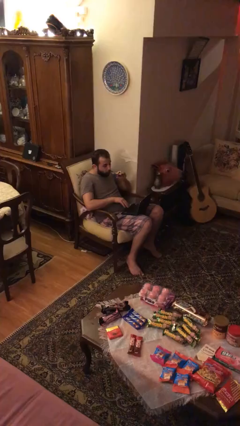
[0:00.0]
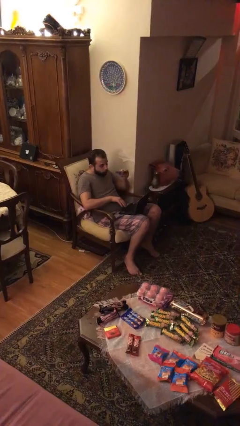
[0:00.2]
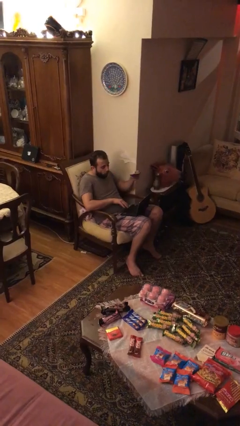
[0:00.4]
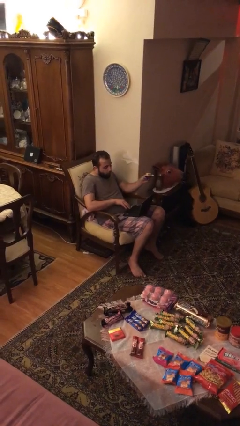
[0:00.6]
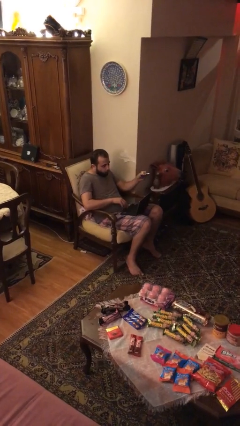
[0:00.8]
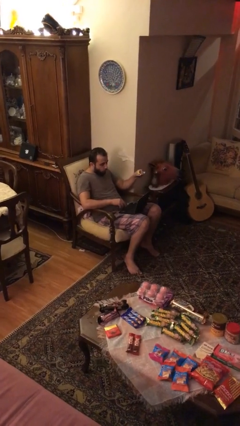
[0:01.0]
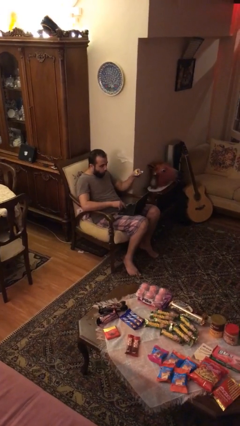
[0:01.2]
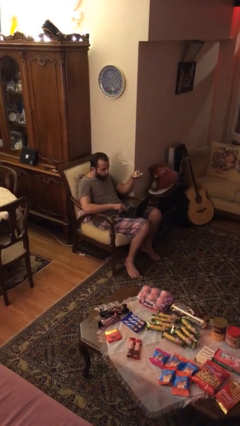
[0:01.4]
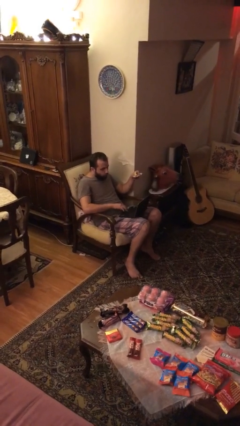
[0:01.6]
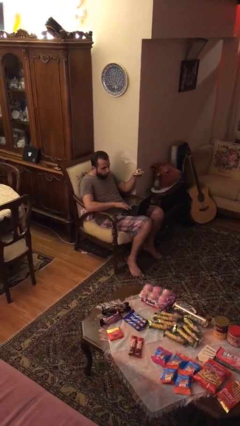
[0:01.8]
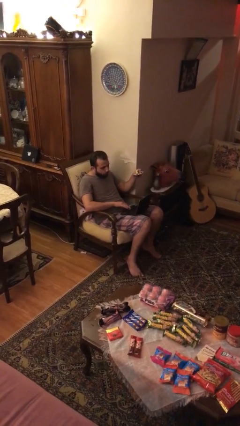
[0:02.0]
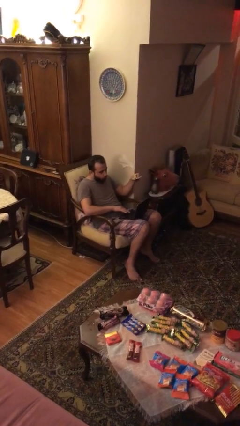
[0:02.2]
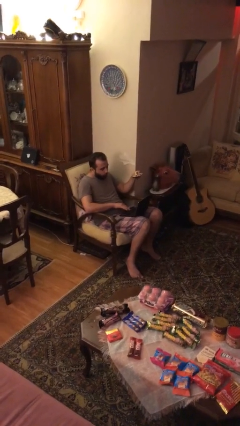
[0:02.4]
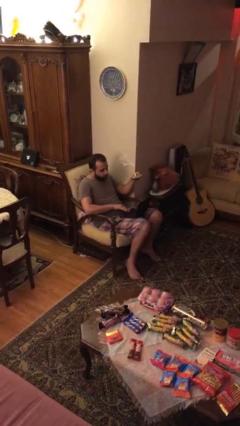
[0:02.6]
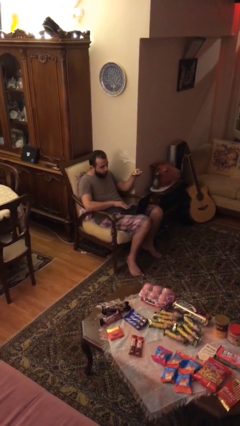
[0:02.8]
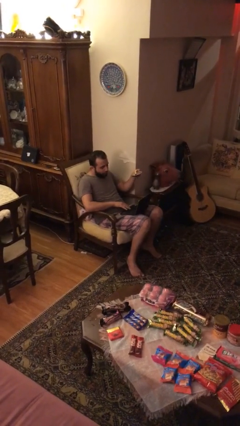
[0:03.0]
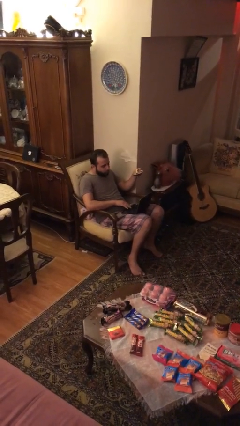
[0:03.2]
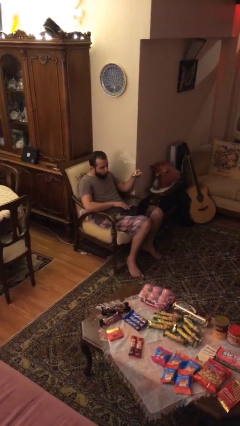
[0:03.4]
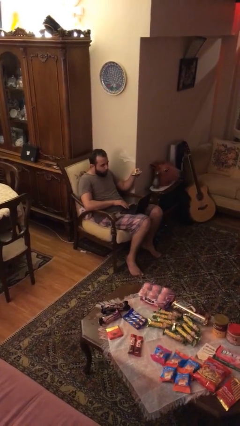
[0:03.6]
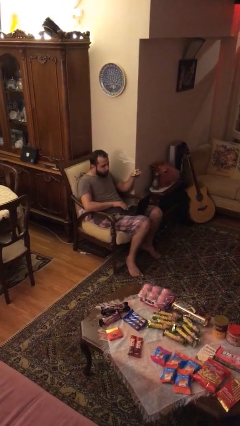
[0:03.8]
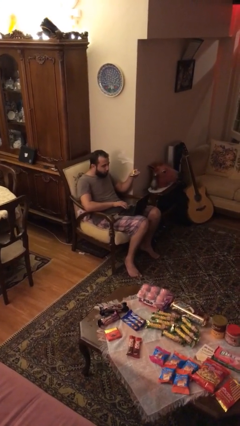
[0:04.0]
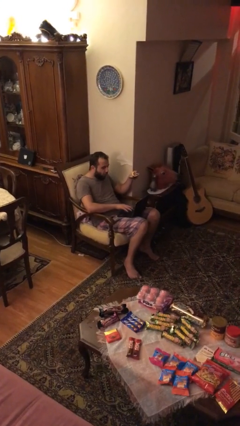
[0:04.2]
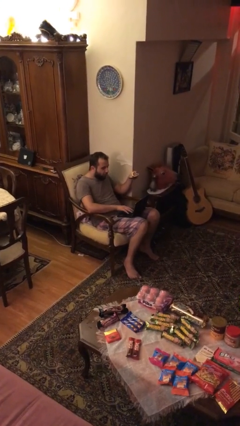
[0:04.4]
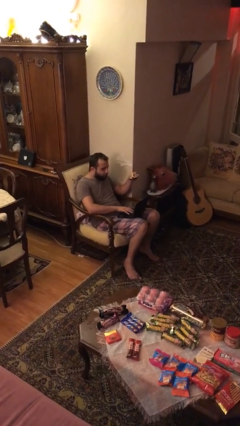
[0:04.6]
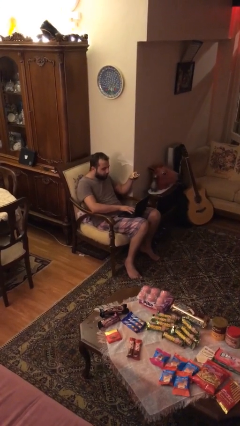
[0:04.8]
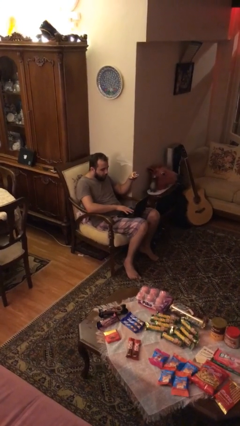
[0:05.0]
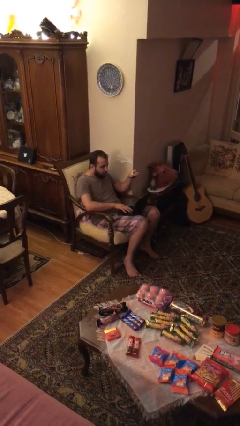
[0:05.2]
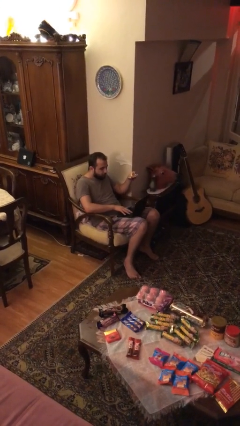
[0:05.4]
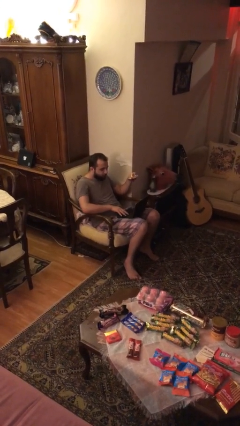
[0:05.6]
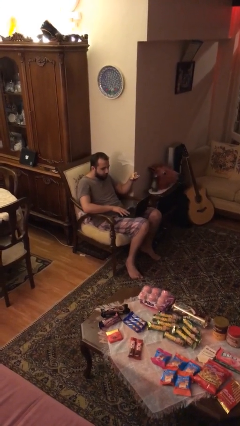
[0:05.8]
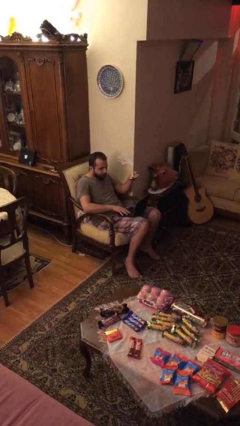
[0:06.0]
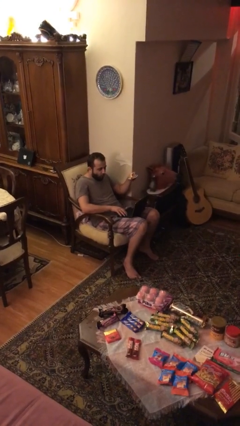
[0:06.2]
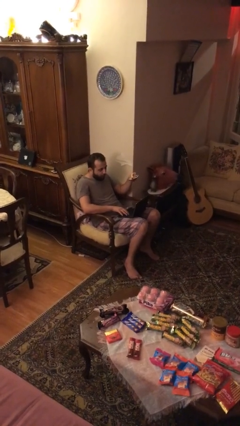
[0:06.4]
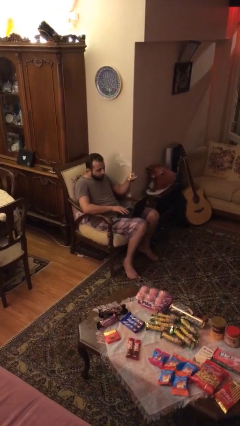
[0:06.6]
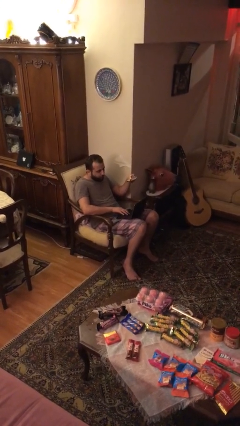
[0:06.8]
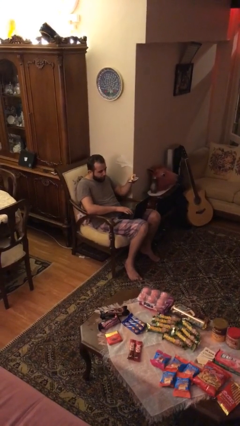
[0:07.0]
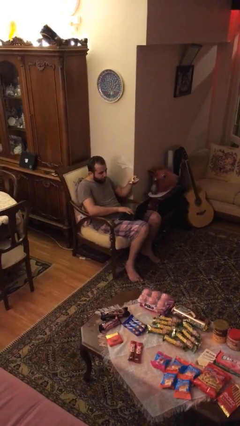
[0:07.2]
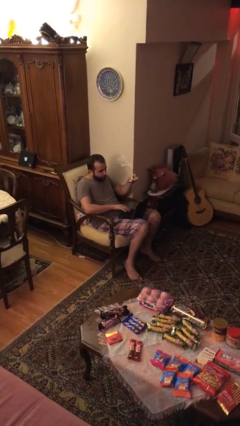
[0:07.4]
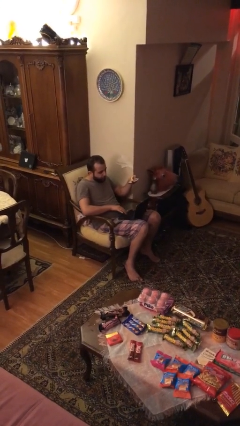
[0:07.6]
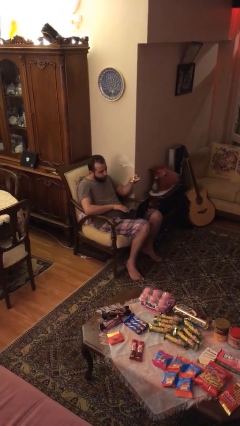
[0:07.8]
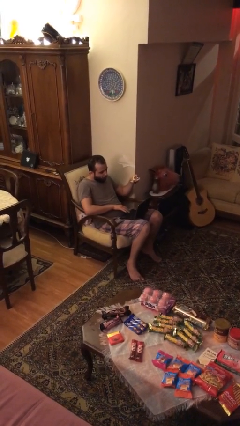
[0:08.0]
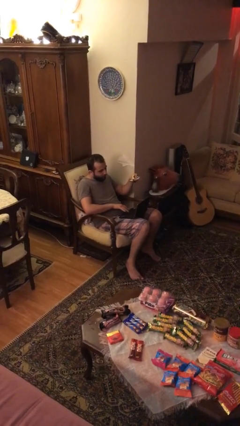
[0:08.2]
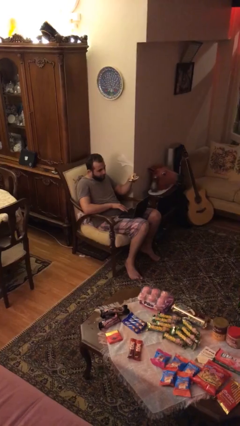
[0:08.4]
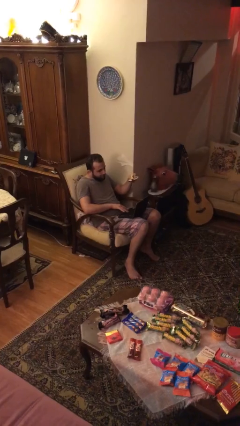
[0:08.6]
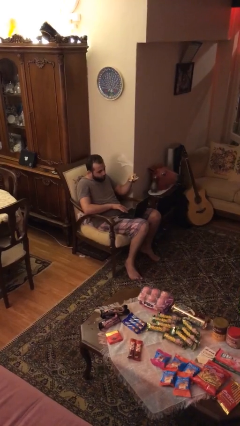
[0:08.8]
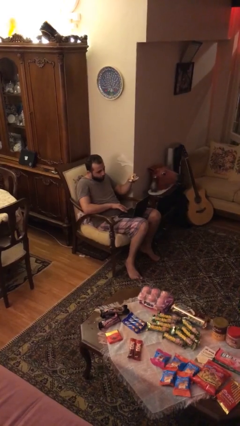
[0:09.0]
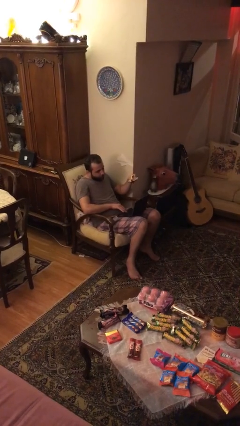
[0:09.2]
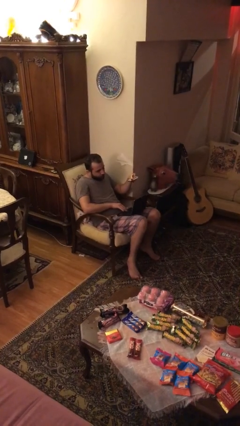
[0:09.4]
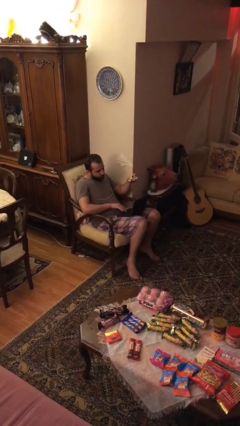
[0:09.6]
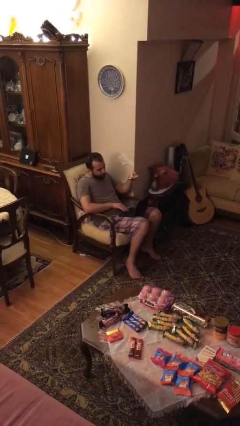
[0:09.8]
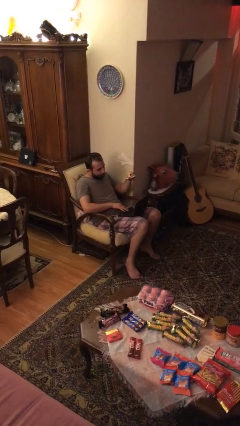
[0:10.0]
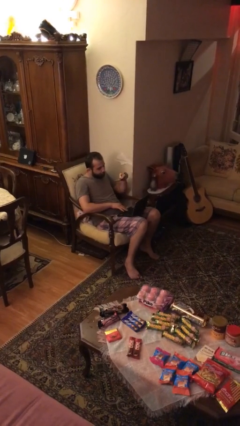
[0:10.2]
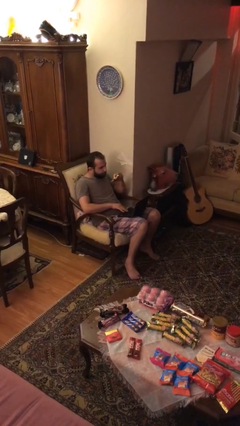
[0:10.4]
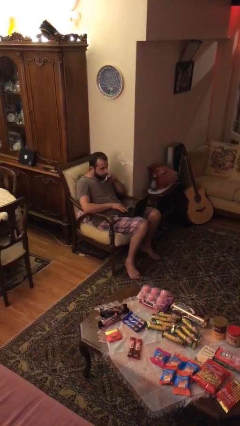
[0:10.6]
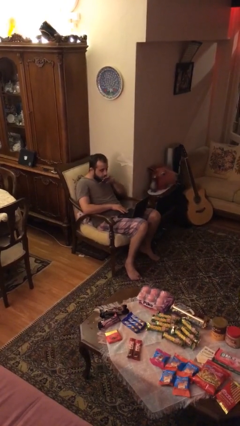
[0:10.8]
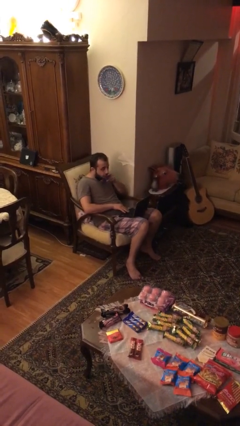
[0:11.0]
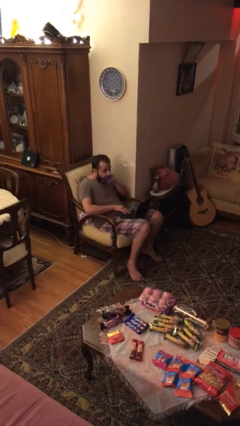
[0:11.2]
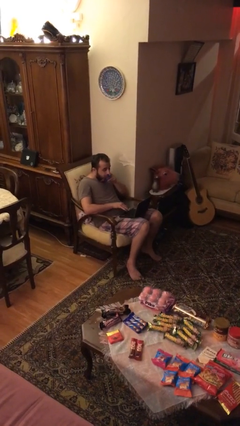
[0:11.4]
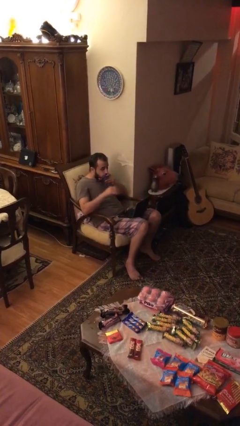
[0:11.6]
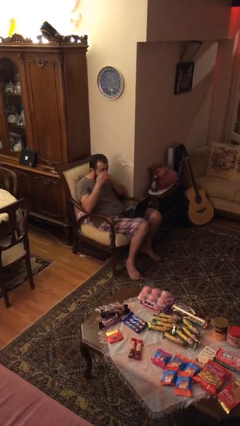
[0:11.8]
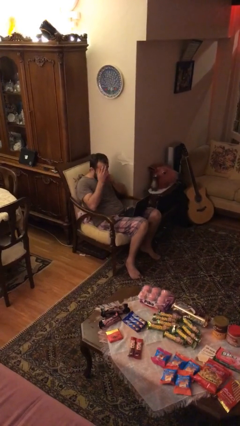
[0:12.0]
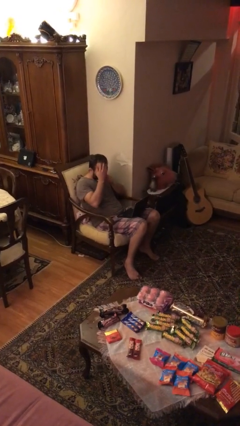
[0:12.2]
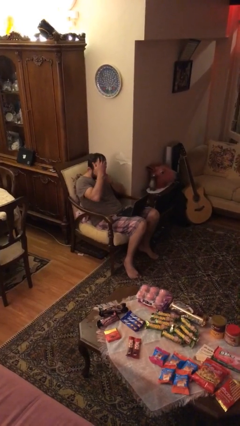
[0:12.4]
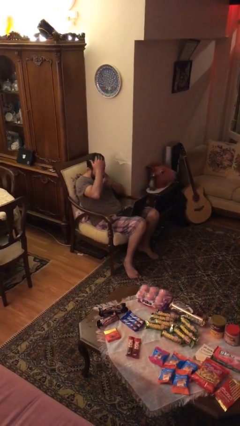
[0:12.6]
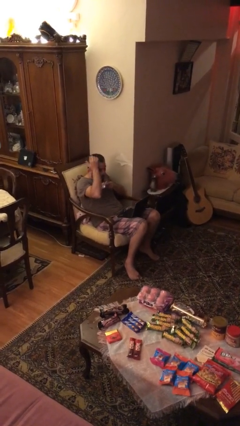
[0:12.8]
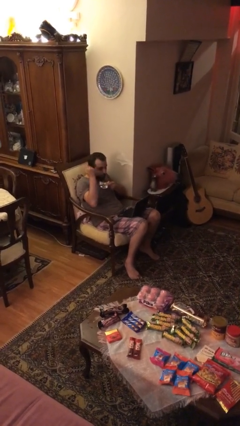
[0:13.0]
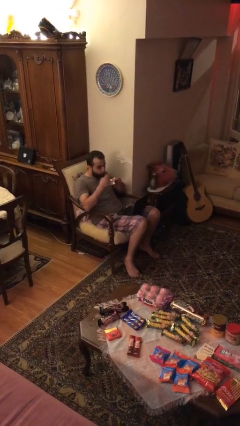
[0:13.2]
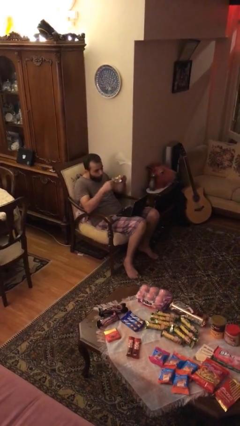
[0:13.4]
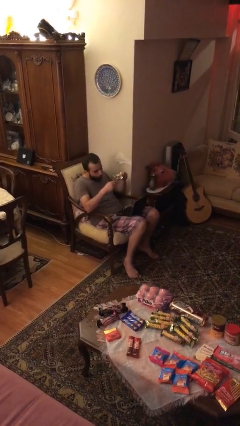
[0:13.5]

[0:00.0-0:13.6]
person interacts with laptop

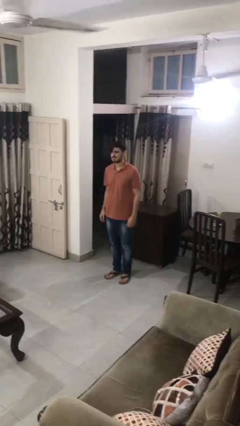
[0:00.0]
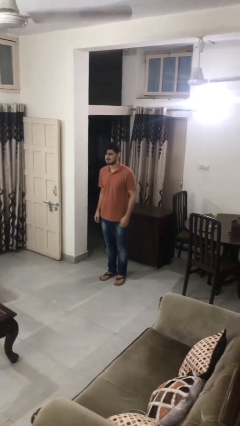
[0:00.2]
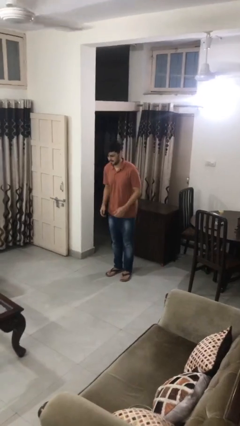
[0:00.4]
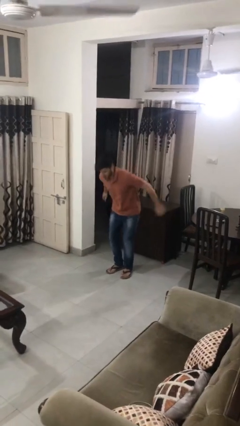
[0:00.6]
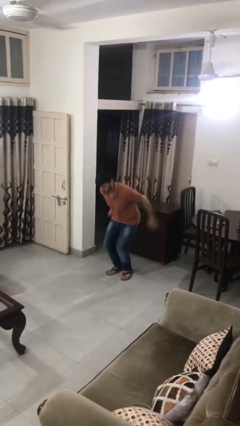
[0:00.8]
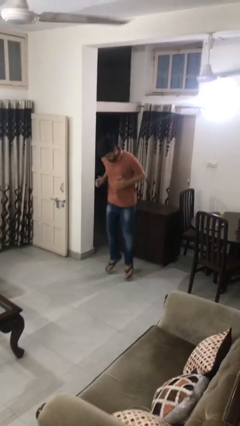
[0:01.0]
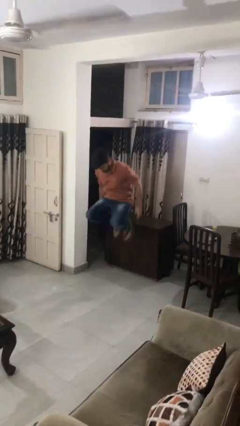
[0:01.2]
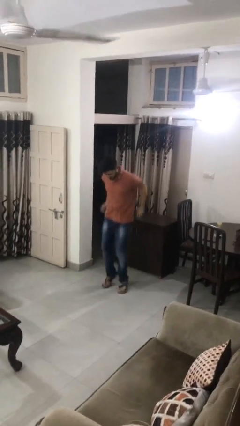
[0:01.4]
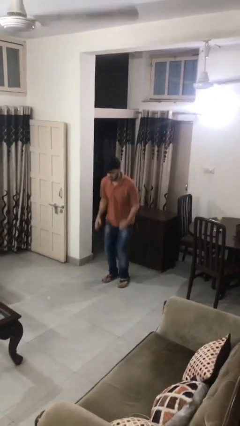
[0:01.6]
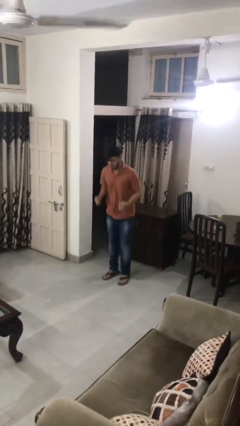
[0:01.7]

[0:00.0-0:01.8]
person jumps

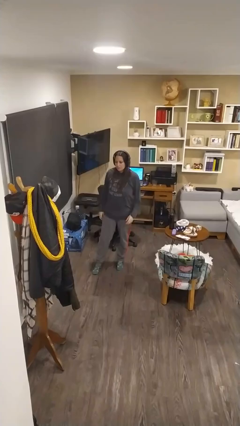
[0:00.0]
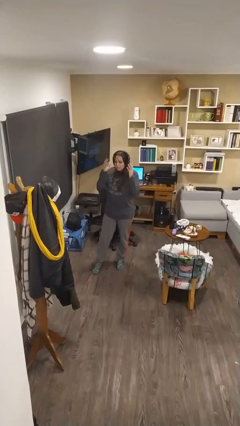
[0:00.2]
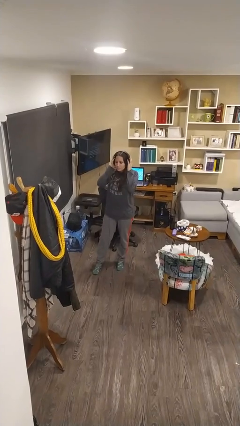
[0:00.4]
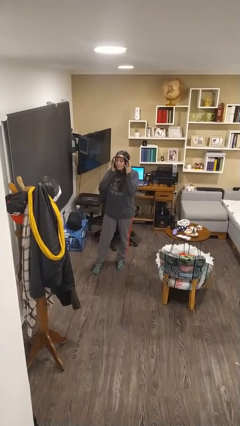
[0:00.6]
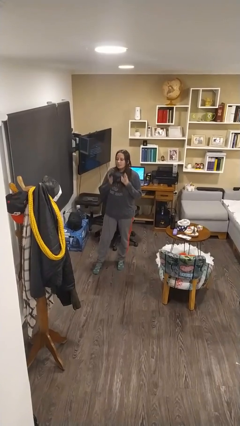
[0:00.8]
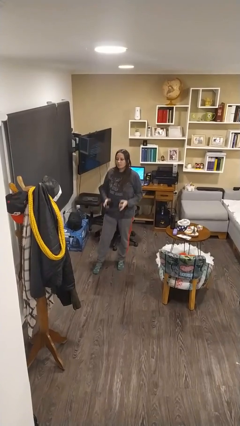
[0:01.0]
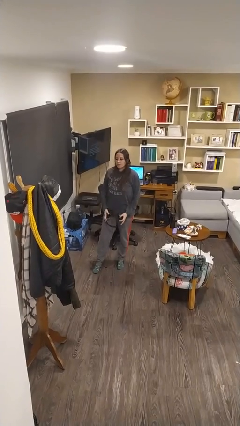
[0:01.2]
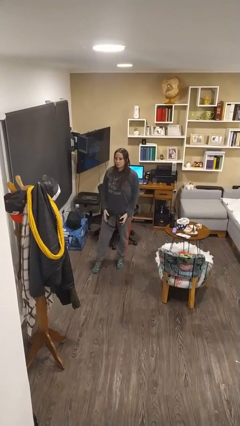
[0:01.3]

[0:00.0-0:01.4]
person takes off headphones

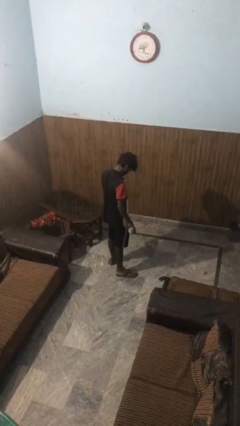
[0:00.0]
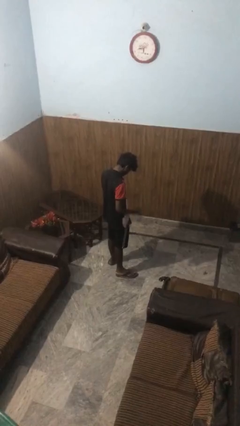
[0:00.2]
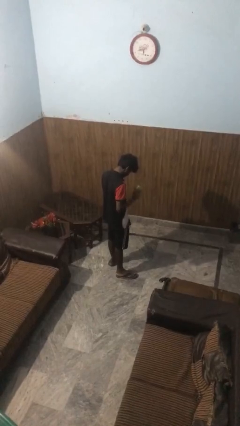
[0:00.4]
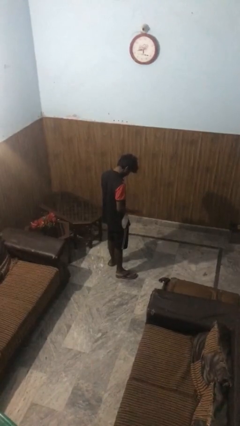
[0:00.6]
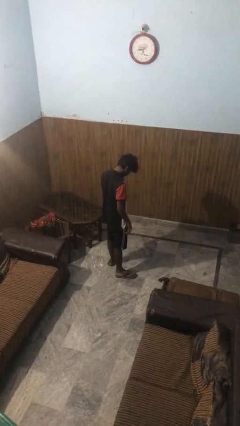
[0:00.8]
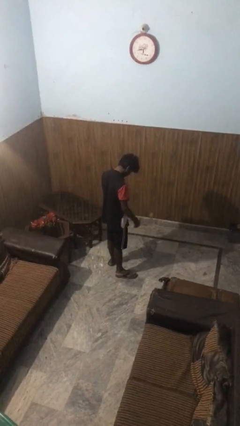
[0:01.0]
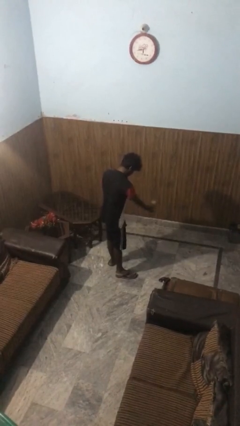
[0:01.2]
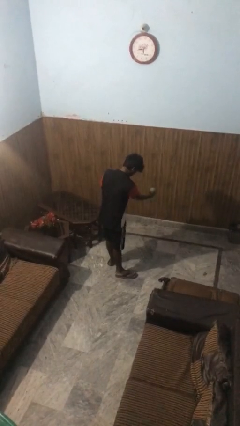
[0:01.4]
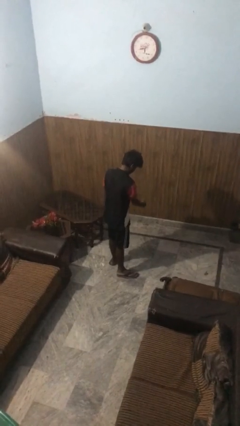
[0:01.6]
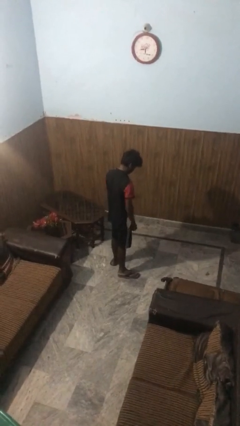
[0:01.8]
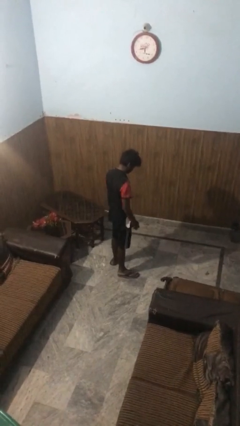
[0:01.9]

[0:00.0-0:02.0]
person bounces ball on floor
